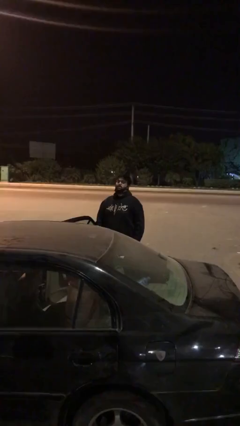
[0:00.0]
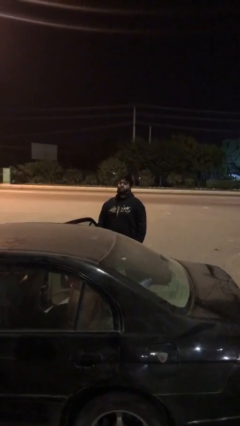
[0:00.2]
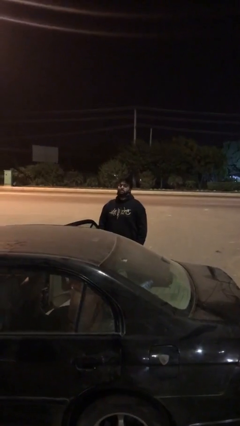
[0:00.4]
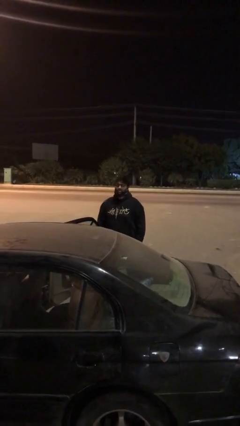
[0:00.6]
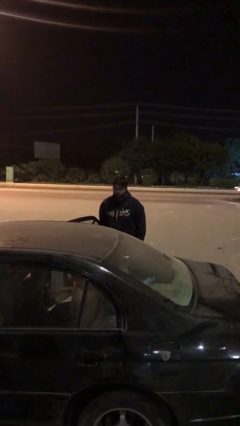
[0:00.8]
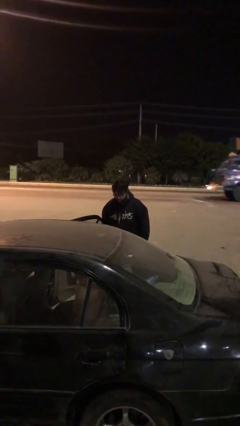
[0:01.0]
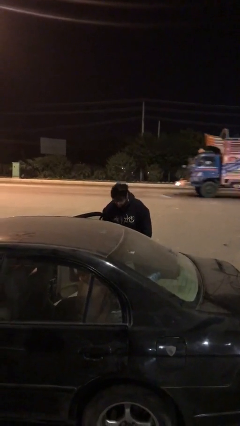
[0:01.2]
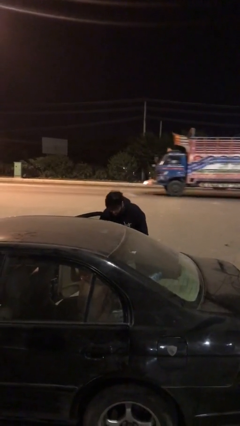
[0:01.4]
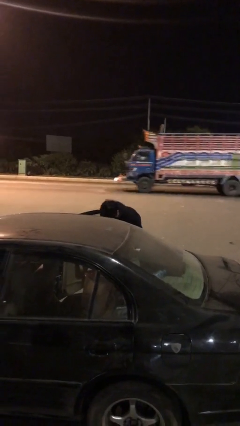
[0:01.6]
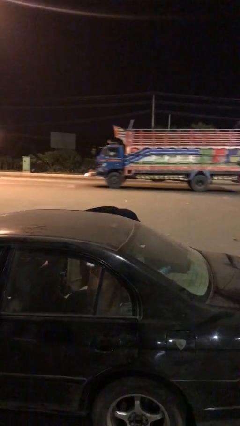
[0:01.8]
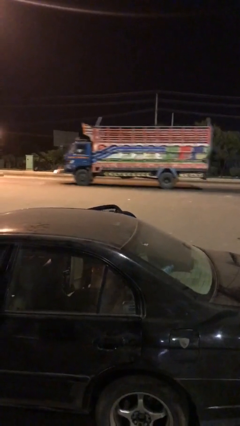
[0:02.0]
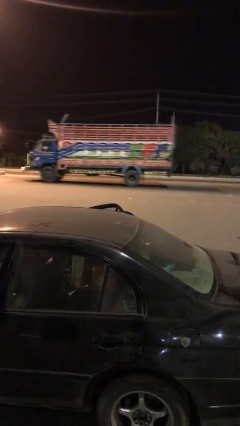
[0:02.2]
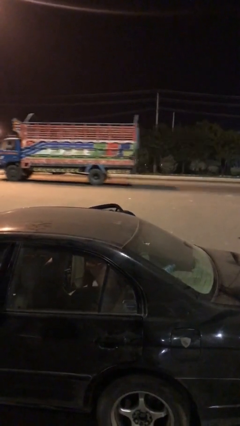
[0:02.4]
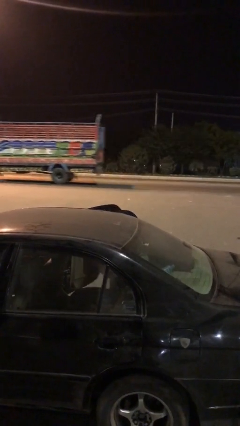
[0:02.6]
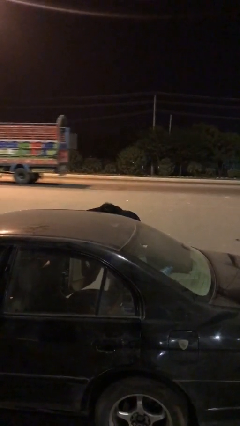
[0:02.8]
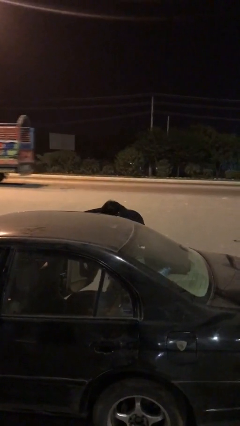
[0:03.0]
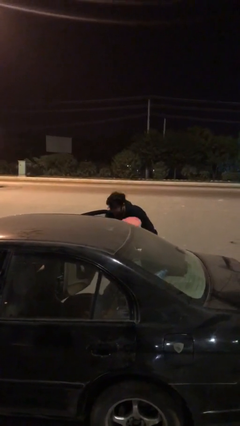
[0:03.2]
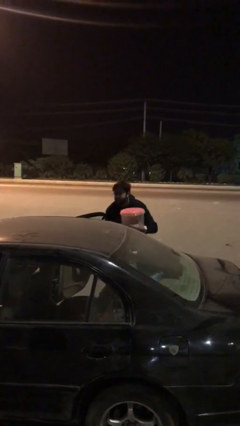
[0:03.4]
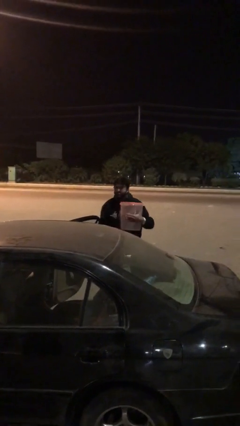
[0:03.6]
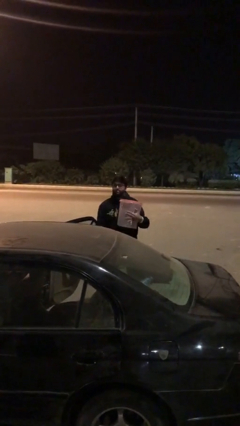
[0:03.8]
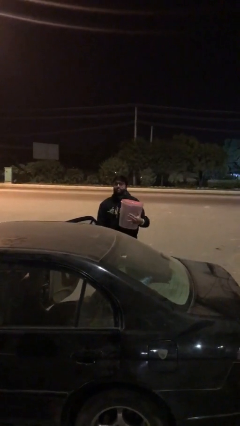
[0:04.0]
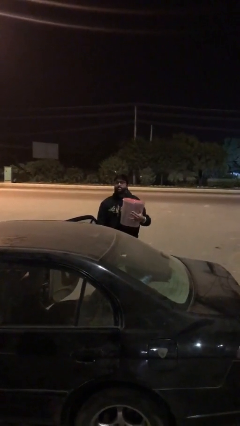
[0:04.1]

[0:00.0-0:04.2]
person unloads car

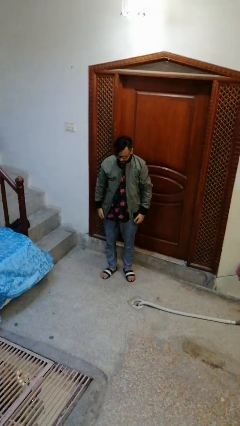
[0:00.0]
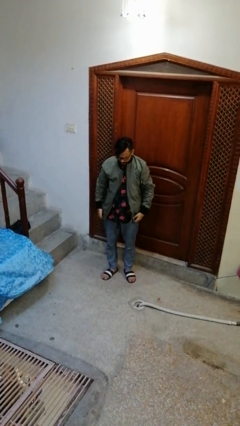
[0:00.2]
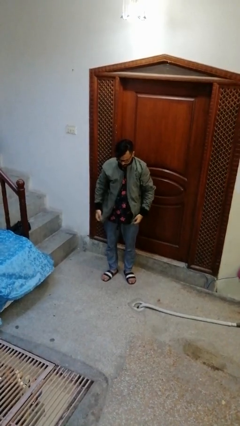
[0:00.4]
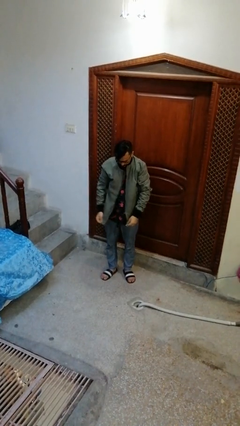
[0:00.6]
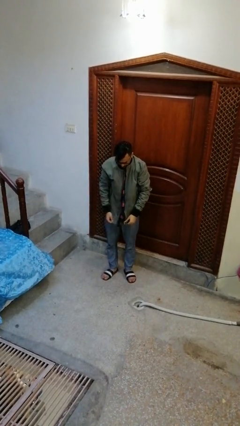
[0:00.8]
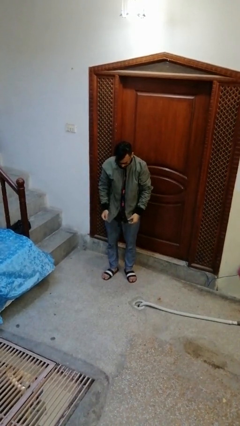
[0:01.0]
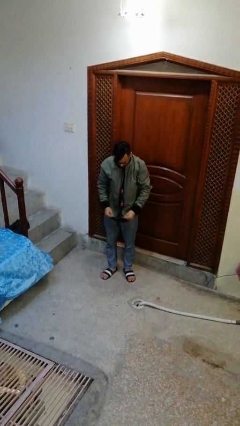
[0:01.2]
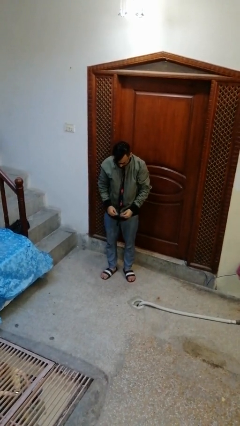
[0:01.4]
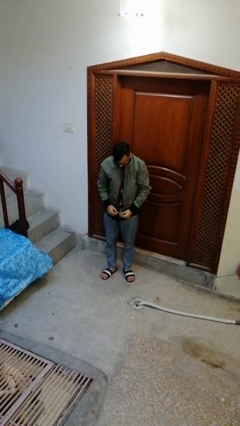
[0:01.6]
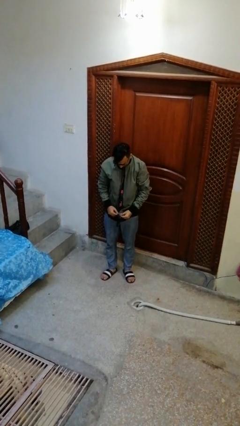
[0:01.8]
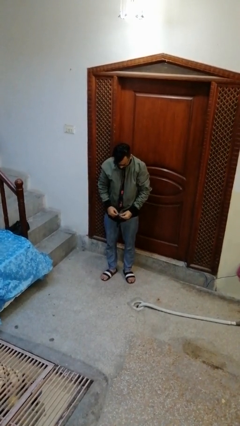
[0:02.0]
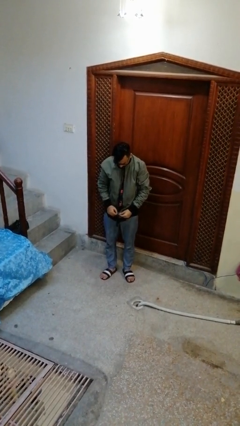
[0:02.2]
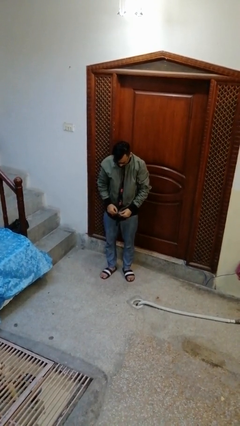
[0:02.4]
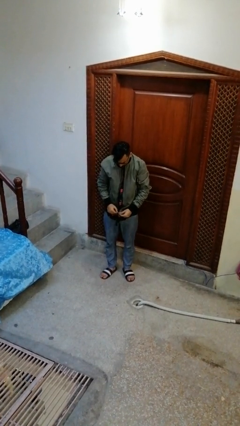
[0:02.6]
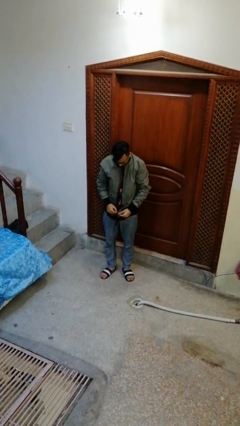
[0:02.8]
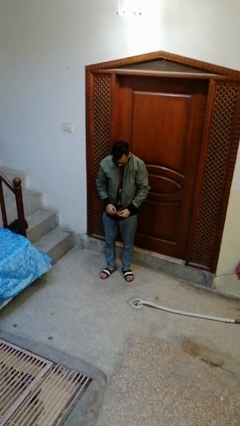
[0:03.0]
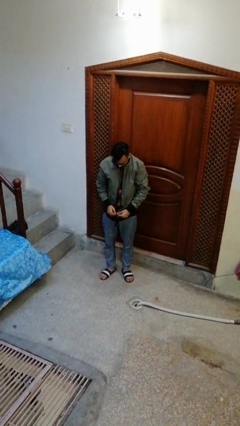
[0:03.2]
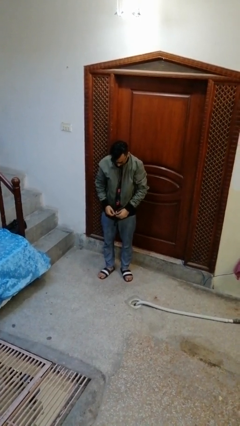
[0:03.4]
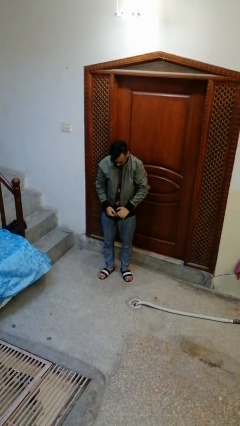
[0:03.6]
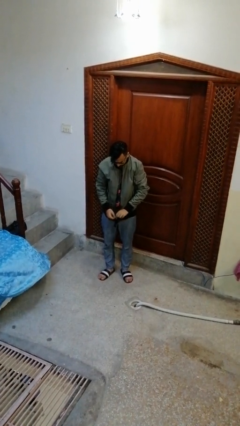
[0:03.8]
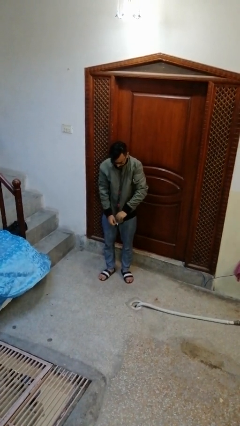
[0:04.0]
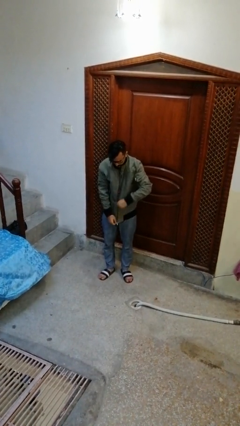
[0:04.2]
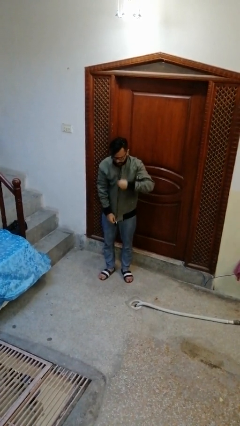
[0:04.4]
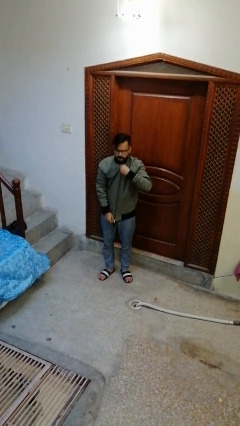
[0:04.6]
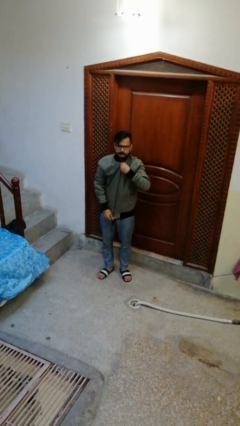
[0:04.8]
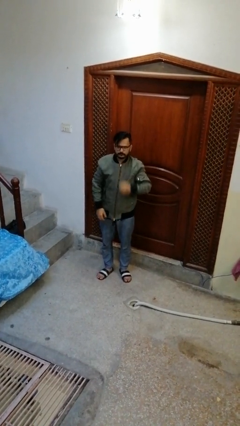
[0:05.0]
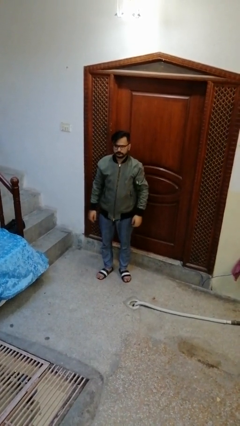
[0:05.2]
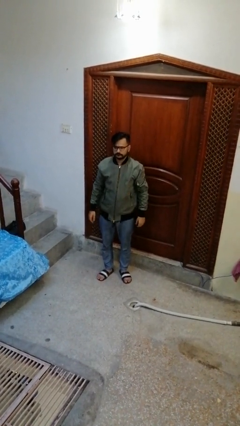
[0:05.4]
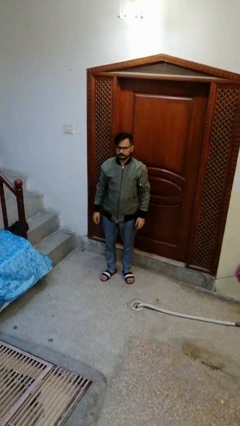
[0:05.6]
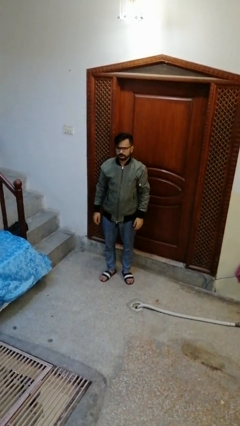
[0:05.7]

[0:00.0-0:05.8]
person zips up jacket

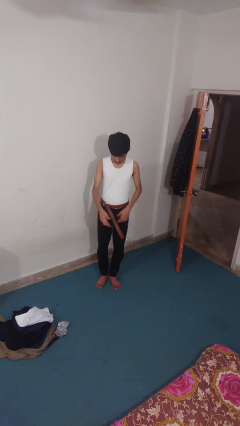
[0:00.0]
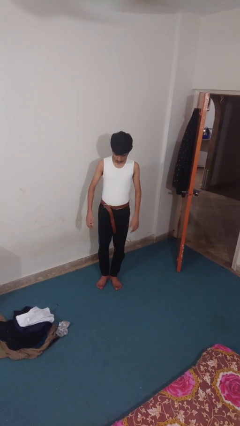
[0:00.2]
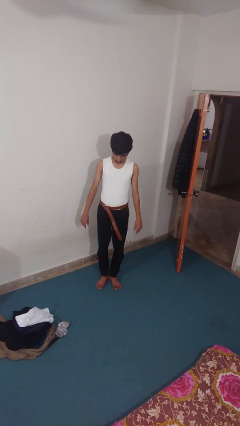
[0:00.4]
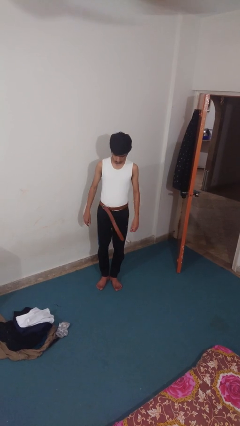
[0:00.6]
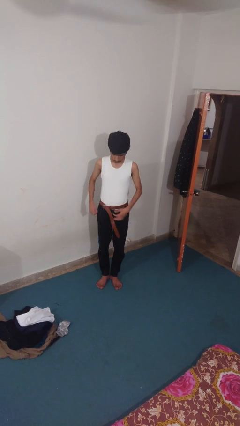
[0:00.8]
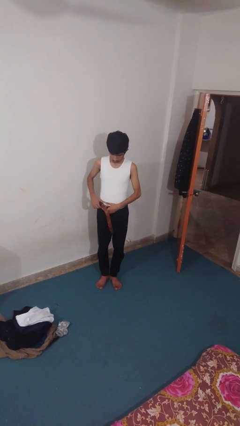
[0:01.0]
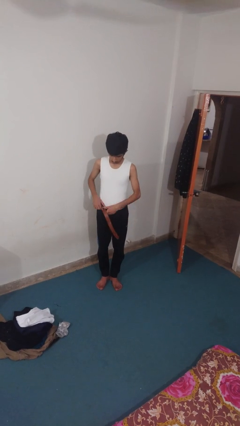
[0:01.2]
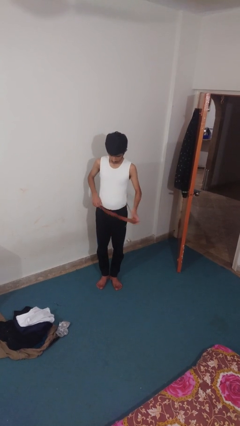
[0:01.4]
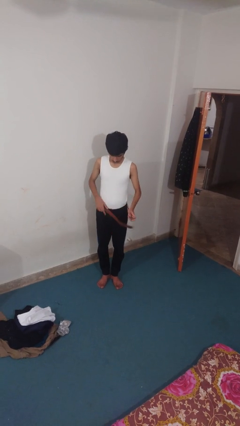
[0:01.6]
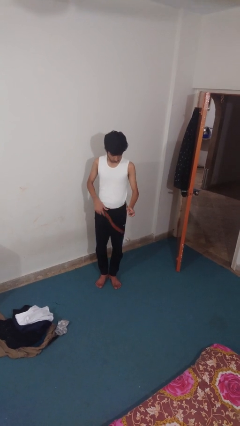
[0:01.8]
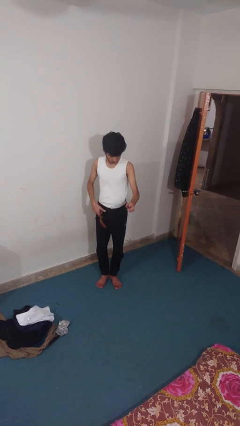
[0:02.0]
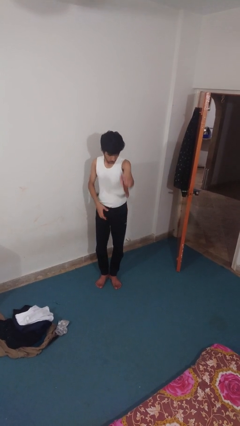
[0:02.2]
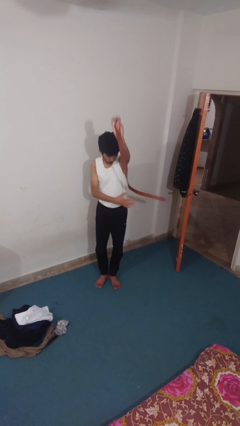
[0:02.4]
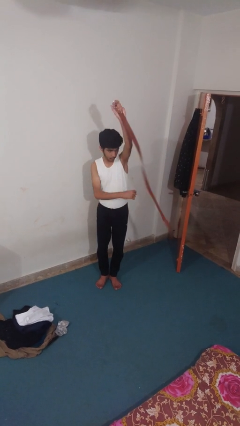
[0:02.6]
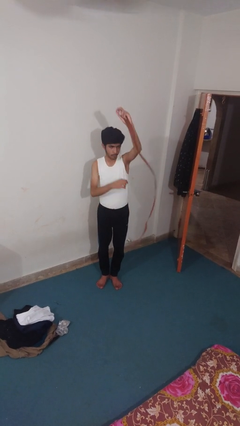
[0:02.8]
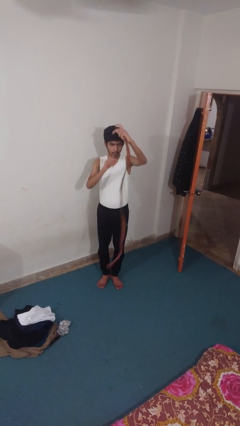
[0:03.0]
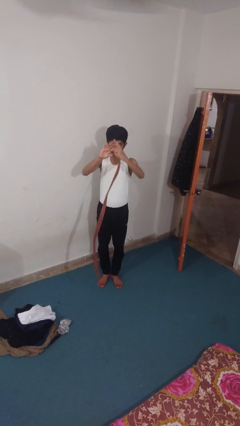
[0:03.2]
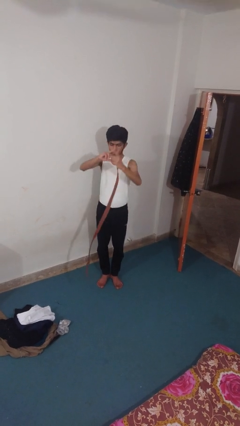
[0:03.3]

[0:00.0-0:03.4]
person takes off belt

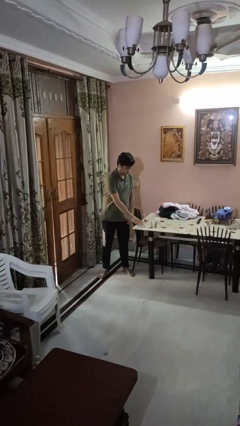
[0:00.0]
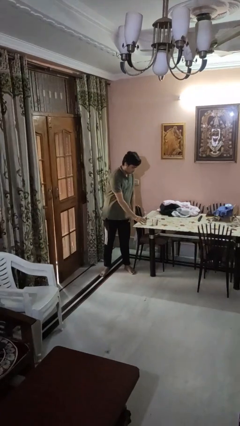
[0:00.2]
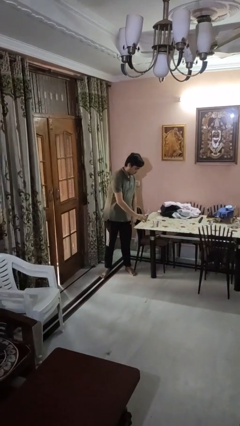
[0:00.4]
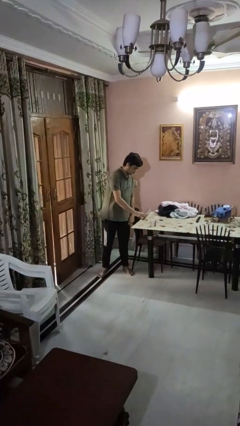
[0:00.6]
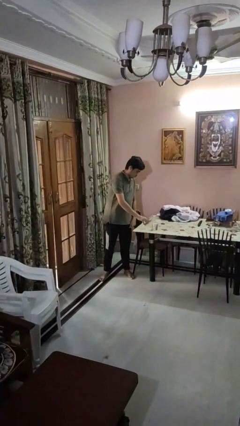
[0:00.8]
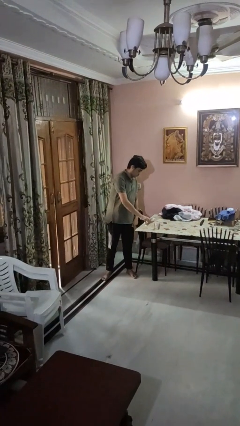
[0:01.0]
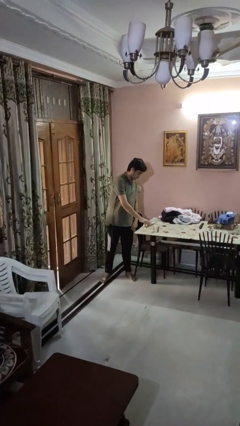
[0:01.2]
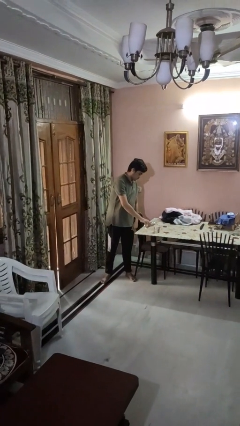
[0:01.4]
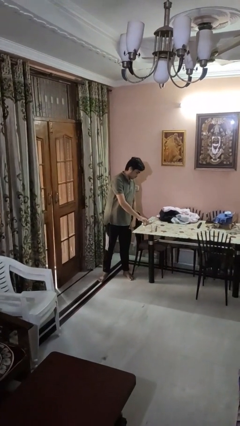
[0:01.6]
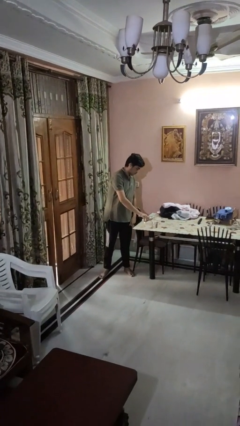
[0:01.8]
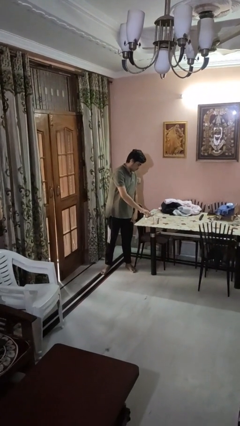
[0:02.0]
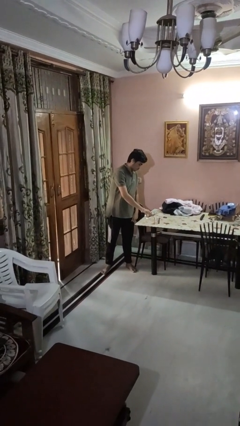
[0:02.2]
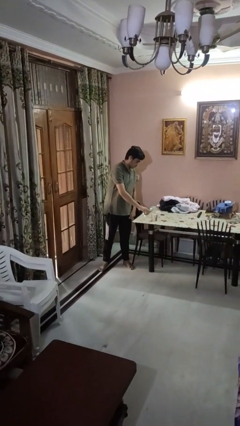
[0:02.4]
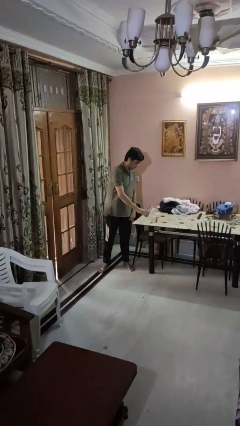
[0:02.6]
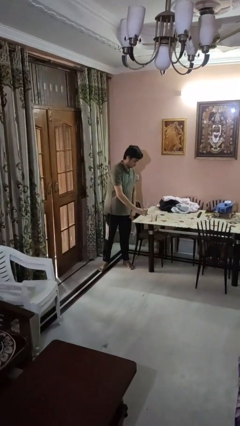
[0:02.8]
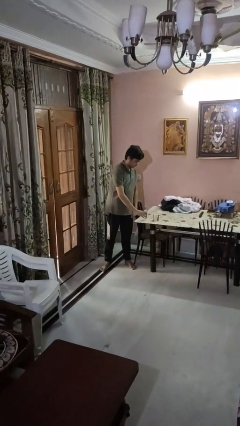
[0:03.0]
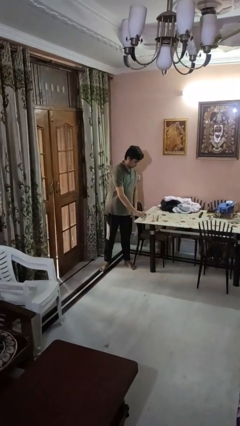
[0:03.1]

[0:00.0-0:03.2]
person pours liquid into cup

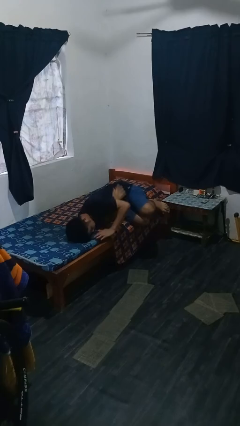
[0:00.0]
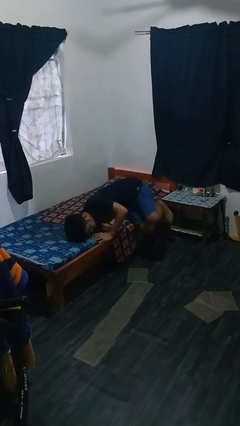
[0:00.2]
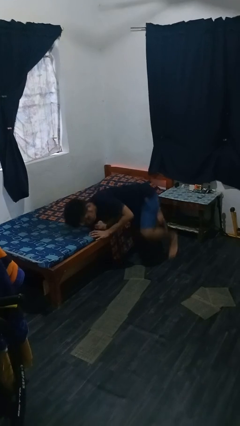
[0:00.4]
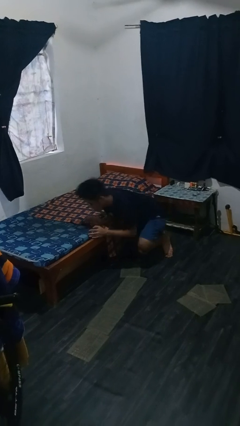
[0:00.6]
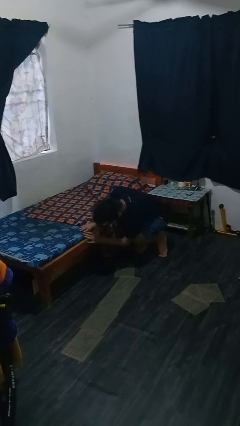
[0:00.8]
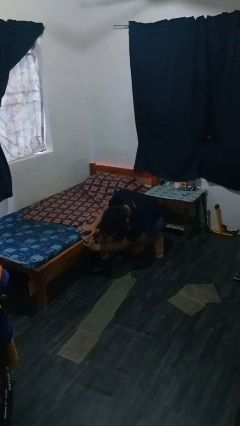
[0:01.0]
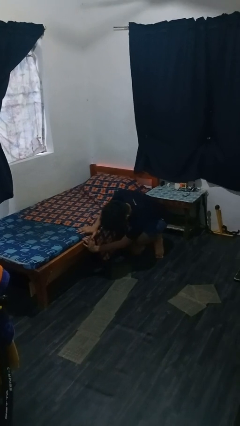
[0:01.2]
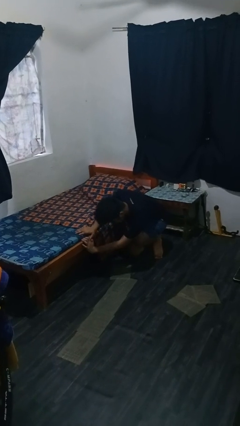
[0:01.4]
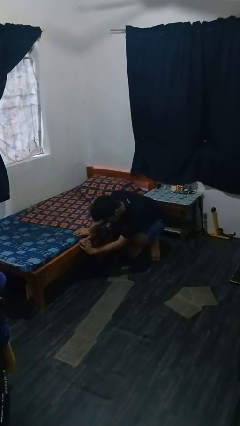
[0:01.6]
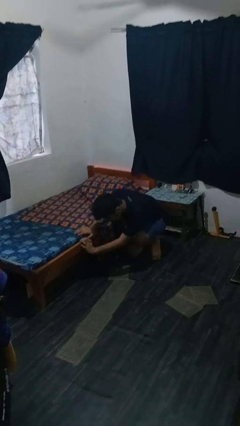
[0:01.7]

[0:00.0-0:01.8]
person falls from bed
